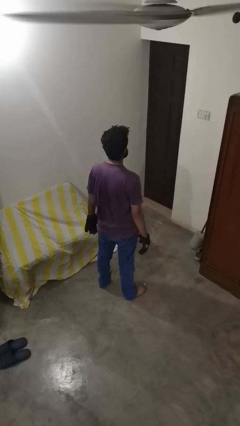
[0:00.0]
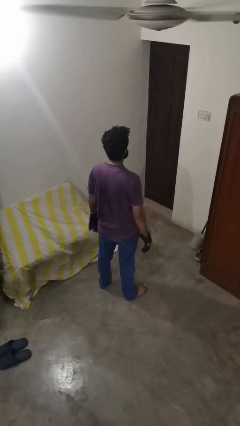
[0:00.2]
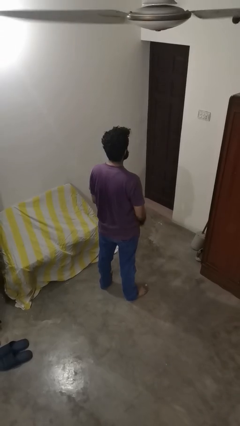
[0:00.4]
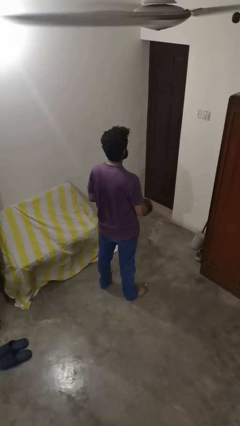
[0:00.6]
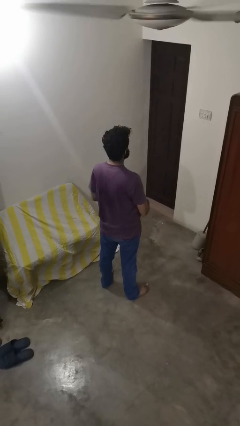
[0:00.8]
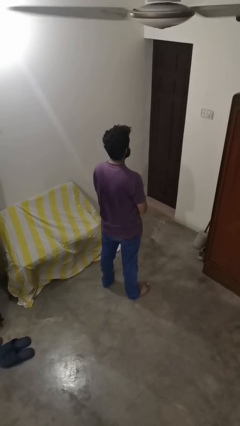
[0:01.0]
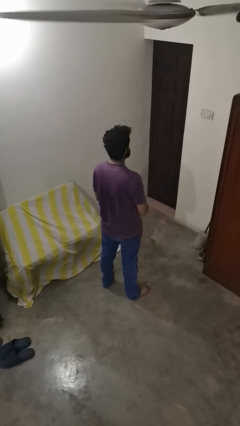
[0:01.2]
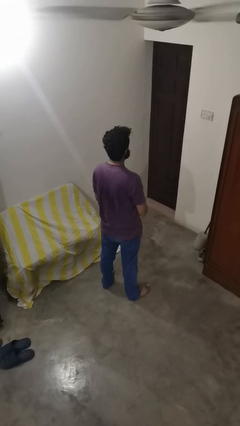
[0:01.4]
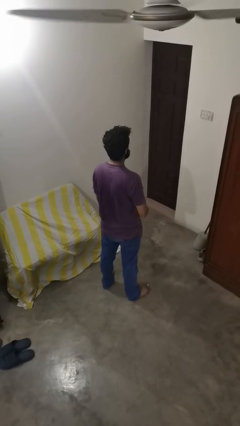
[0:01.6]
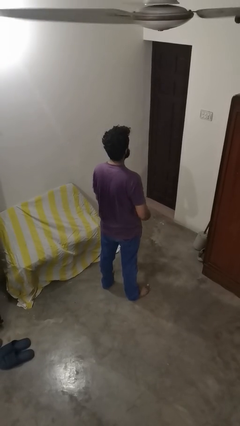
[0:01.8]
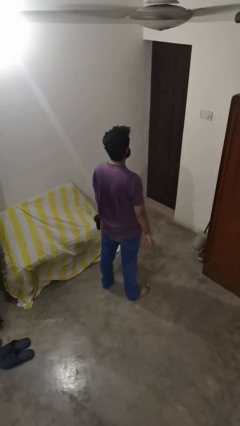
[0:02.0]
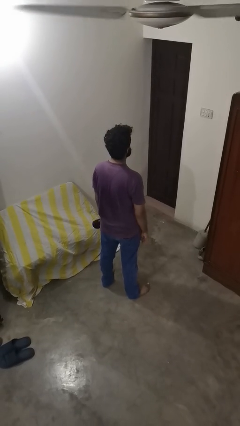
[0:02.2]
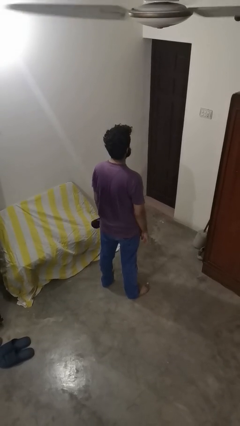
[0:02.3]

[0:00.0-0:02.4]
person takes off gloves

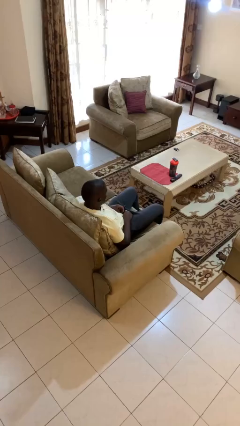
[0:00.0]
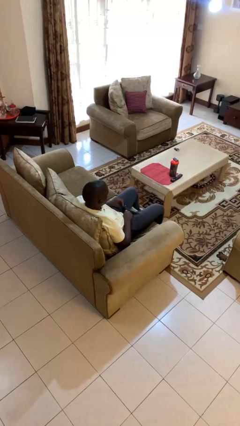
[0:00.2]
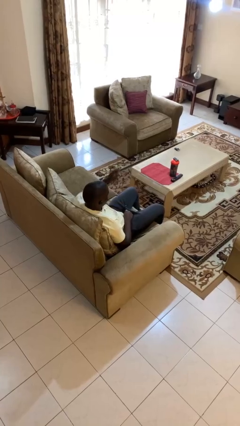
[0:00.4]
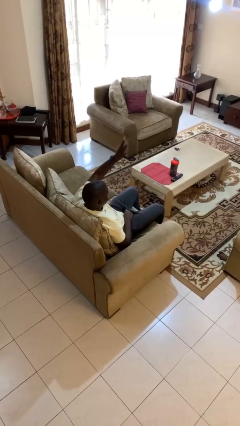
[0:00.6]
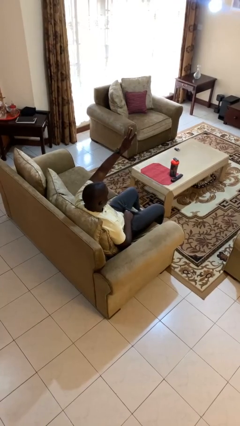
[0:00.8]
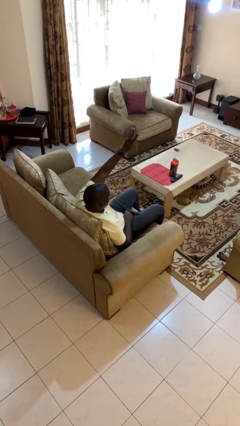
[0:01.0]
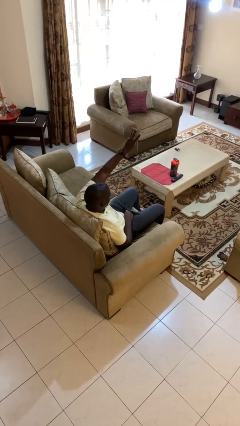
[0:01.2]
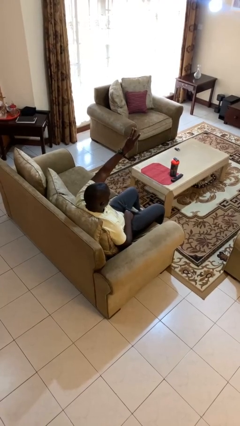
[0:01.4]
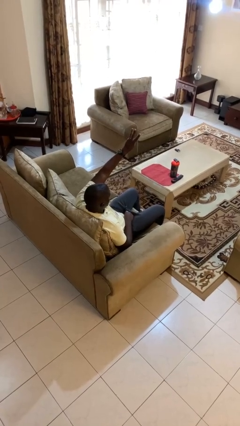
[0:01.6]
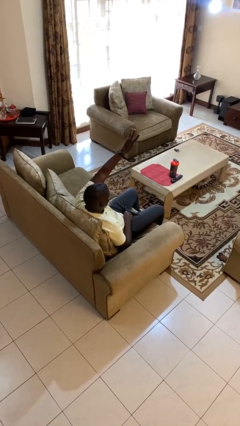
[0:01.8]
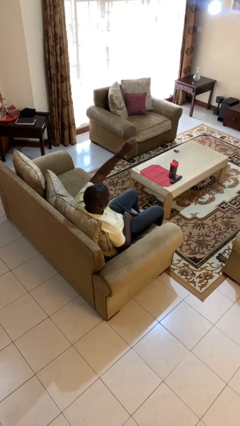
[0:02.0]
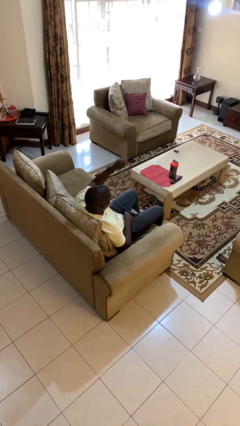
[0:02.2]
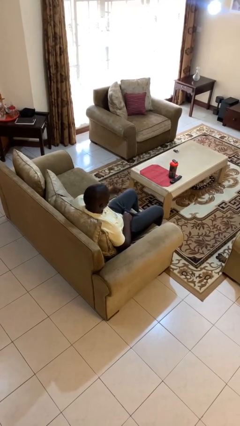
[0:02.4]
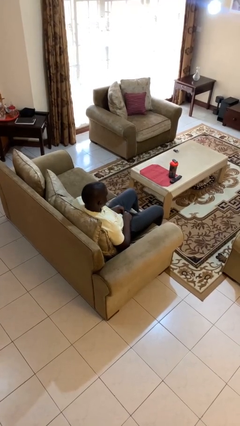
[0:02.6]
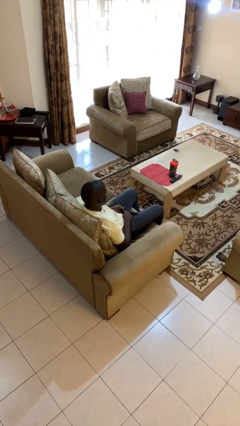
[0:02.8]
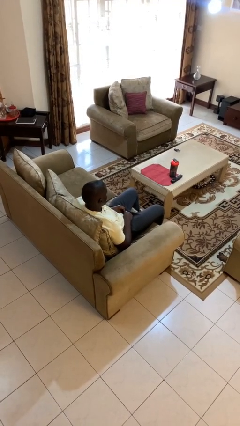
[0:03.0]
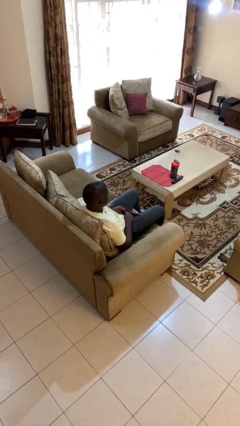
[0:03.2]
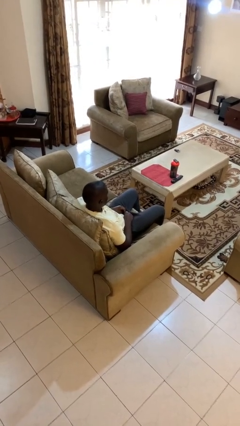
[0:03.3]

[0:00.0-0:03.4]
person gestures number three

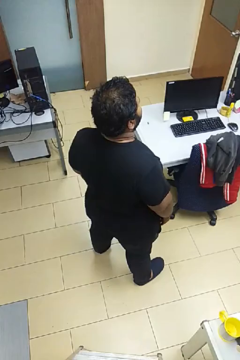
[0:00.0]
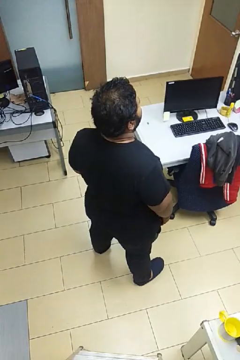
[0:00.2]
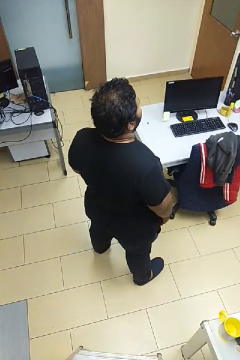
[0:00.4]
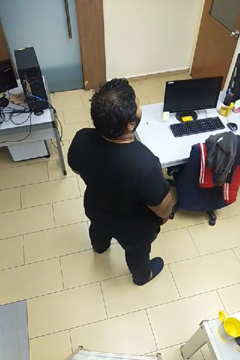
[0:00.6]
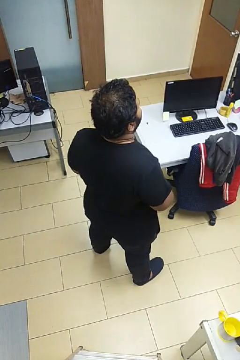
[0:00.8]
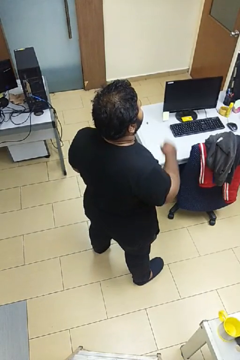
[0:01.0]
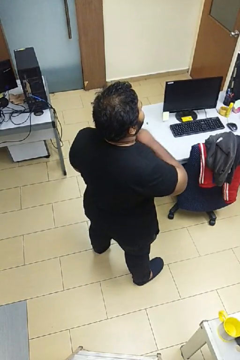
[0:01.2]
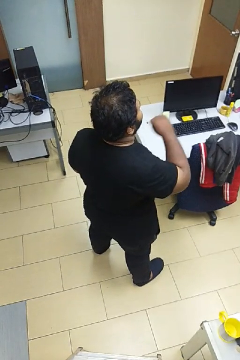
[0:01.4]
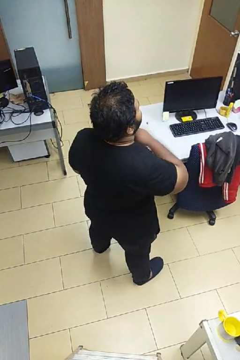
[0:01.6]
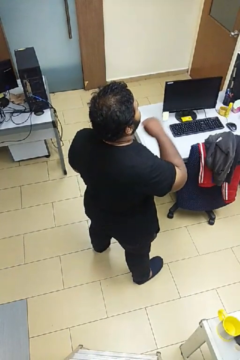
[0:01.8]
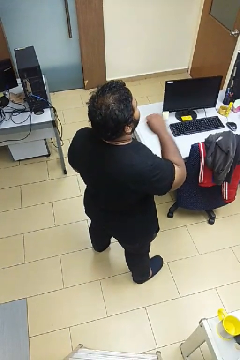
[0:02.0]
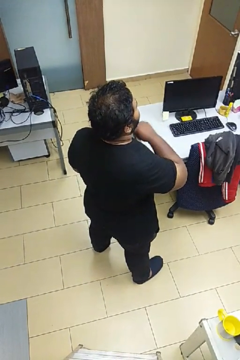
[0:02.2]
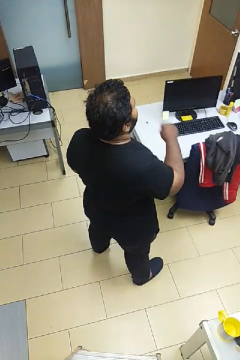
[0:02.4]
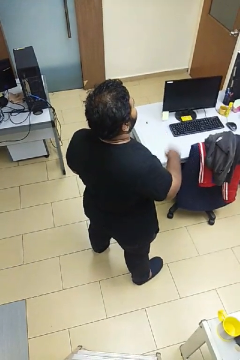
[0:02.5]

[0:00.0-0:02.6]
person drums on chest

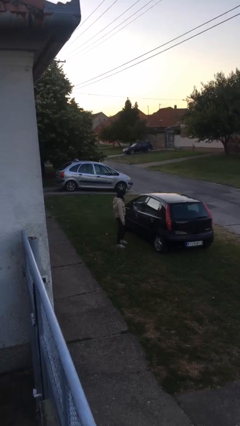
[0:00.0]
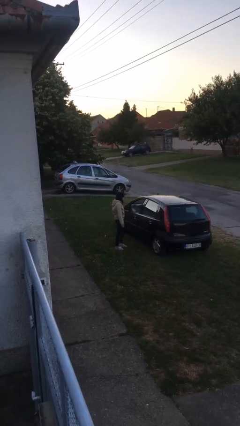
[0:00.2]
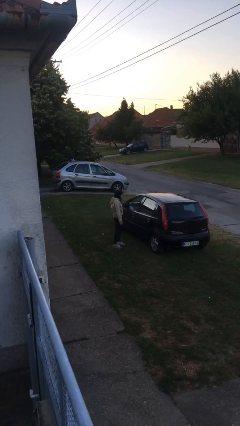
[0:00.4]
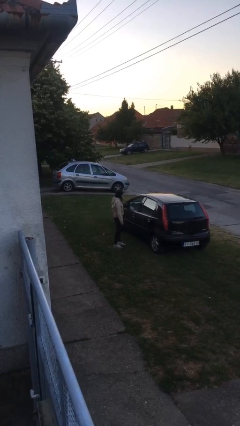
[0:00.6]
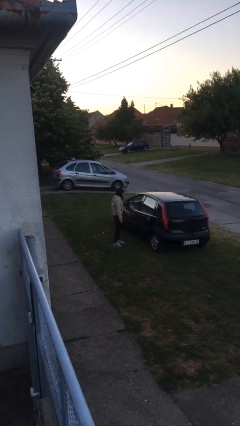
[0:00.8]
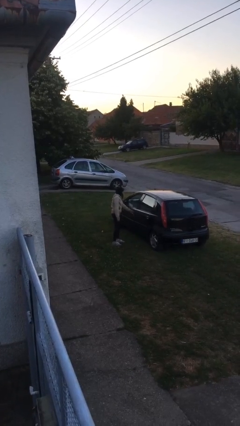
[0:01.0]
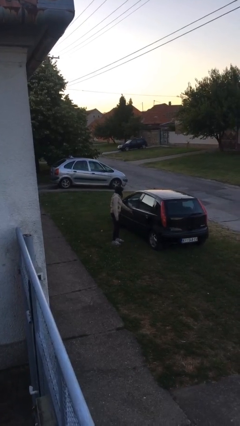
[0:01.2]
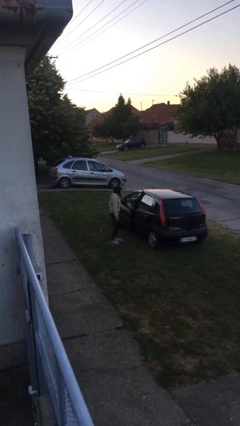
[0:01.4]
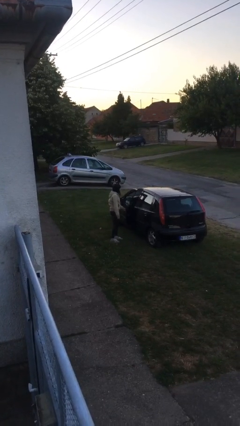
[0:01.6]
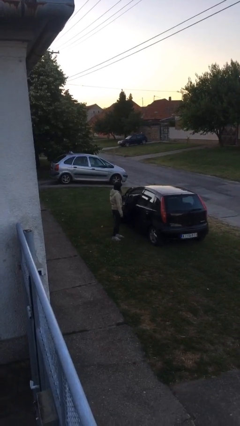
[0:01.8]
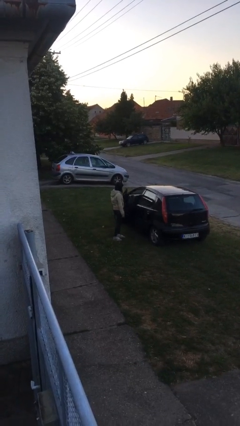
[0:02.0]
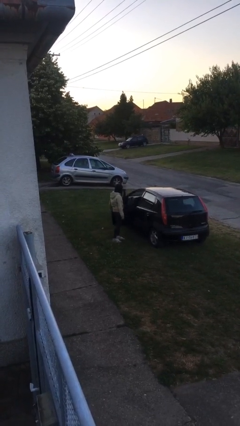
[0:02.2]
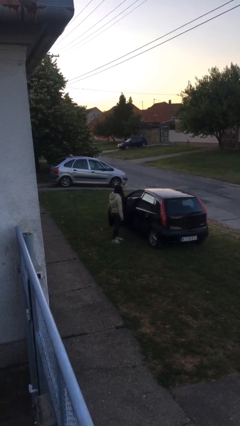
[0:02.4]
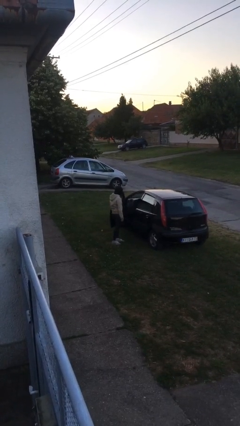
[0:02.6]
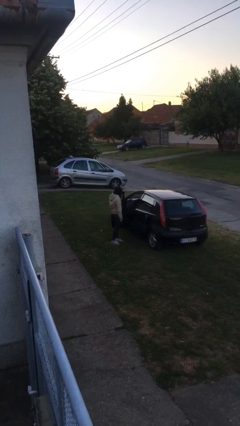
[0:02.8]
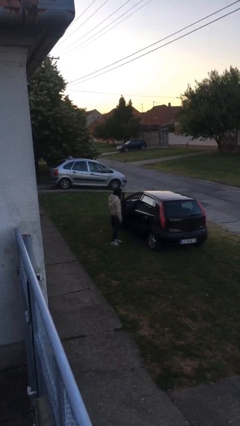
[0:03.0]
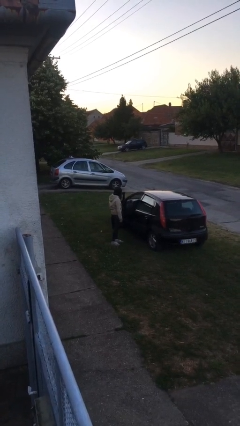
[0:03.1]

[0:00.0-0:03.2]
person opens car door

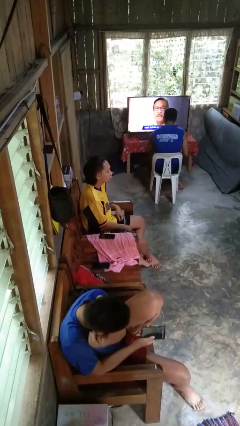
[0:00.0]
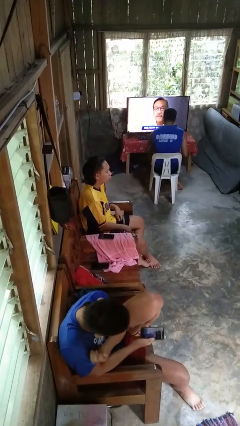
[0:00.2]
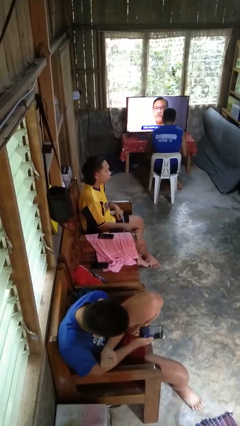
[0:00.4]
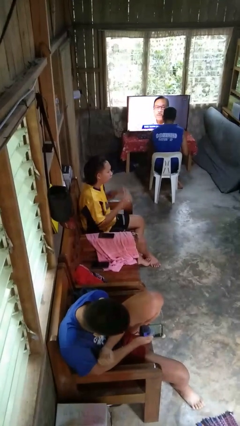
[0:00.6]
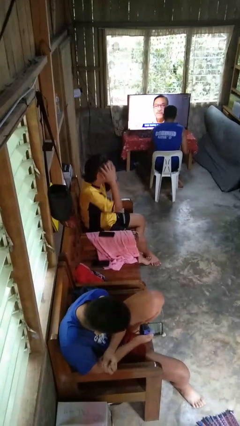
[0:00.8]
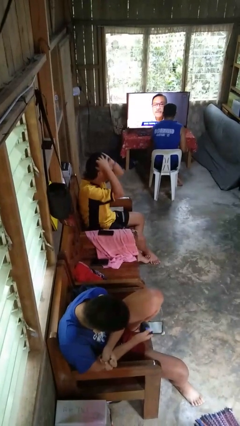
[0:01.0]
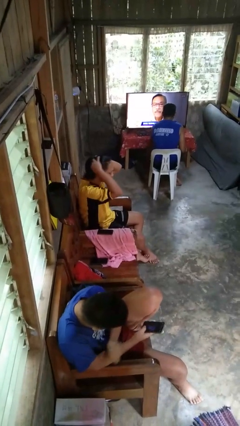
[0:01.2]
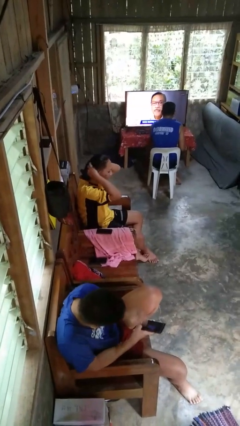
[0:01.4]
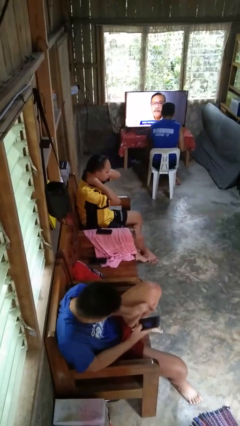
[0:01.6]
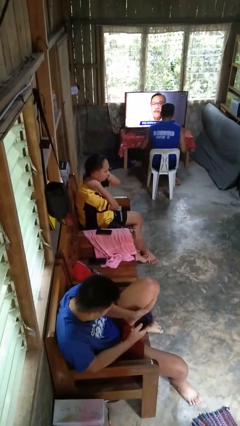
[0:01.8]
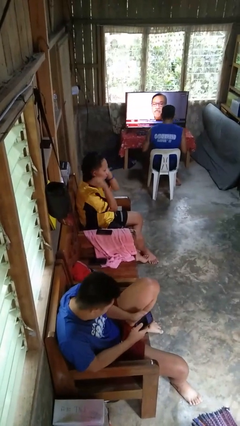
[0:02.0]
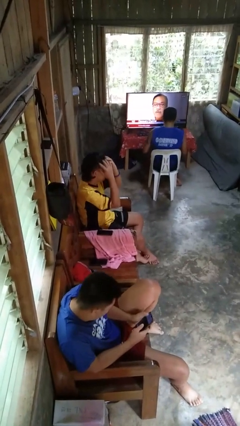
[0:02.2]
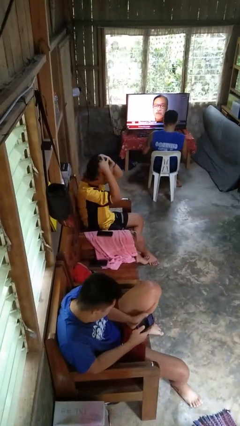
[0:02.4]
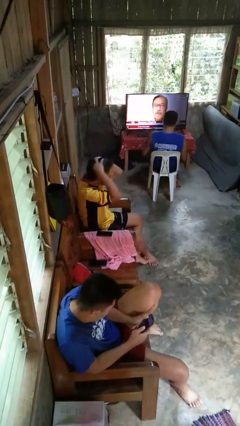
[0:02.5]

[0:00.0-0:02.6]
person strokes hair

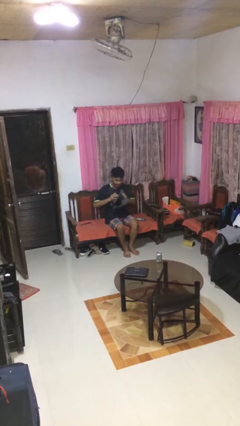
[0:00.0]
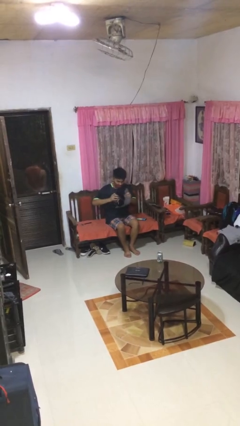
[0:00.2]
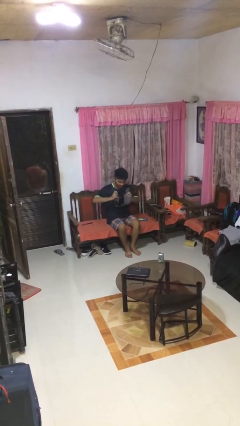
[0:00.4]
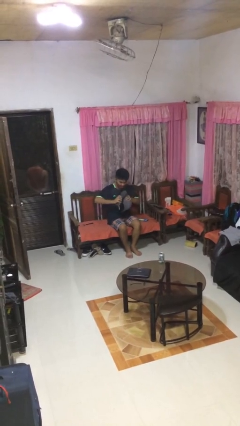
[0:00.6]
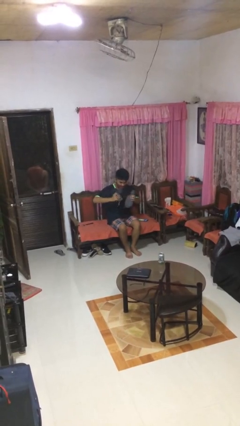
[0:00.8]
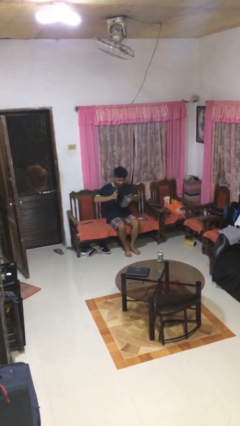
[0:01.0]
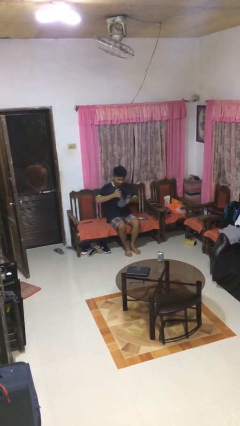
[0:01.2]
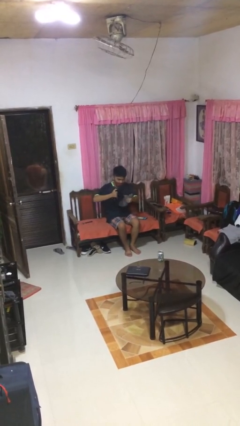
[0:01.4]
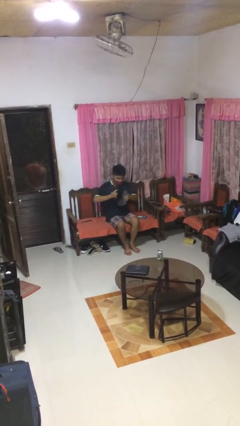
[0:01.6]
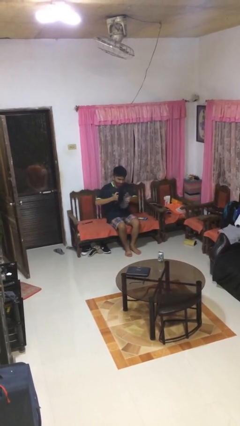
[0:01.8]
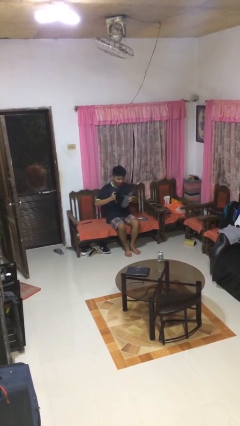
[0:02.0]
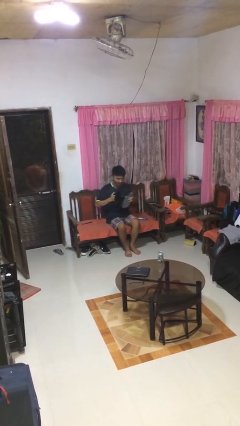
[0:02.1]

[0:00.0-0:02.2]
person squeezes object

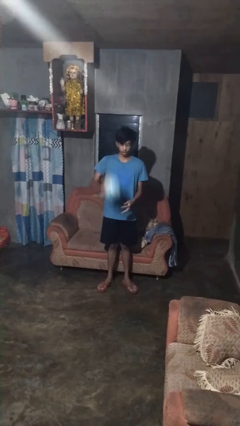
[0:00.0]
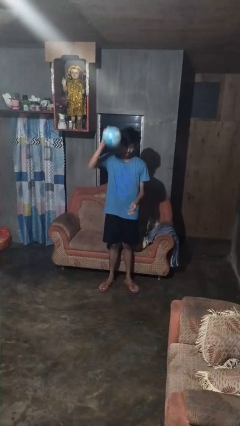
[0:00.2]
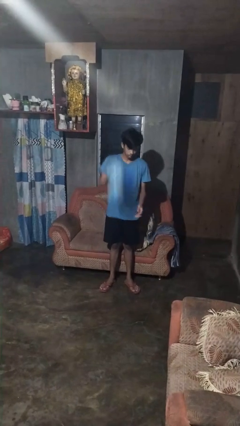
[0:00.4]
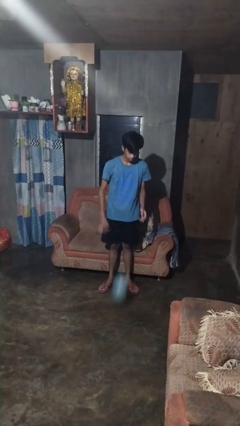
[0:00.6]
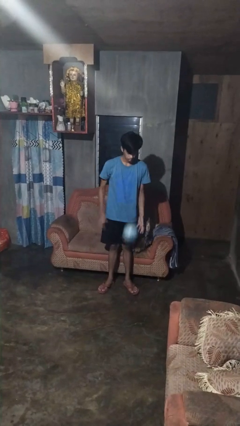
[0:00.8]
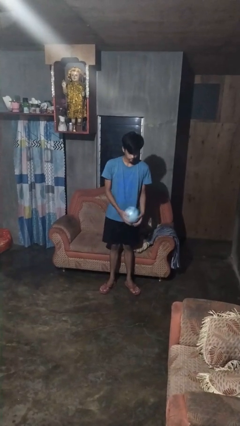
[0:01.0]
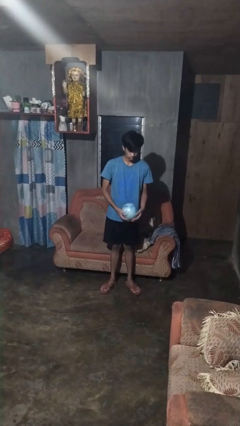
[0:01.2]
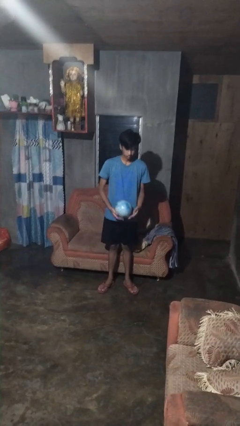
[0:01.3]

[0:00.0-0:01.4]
person bounces ball on floor
